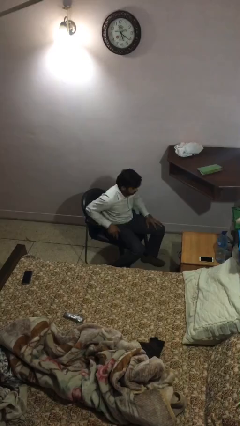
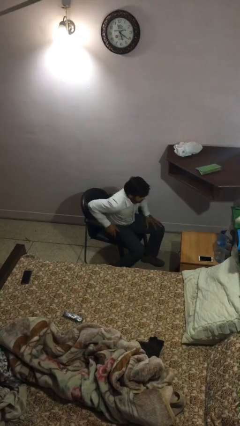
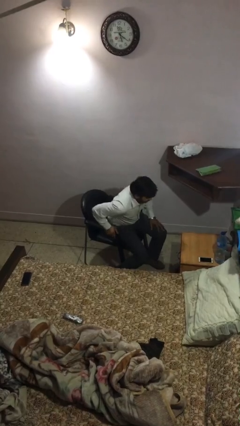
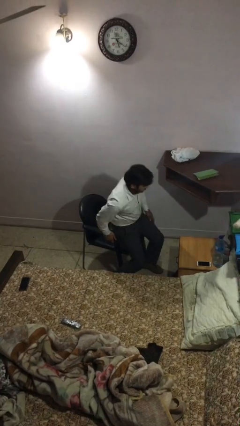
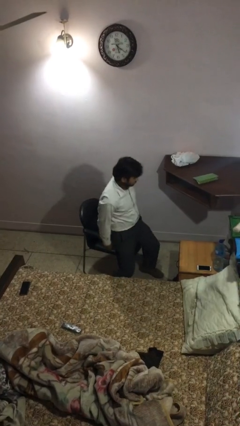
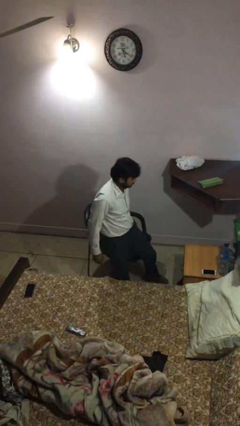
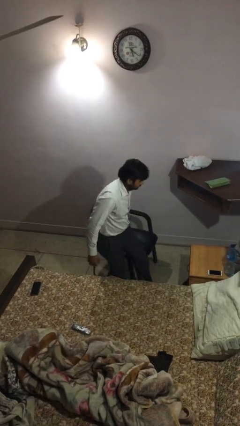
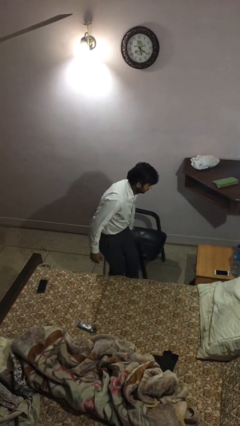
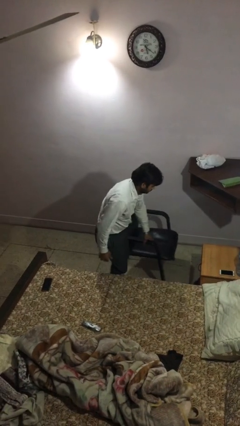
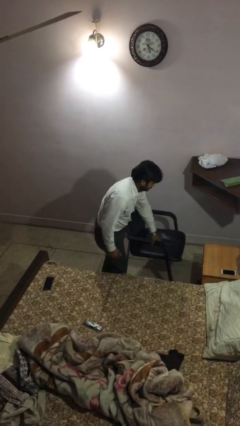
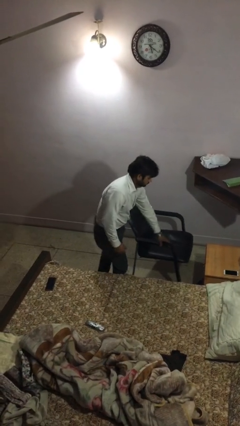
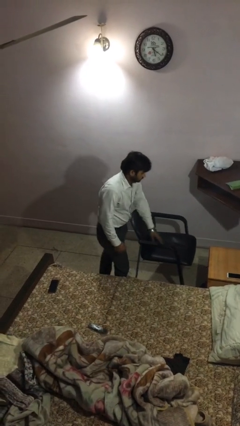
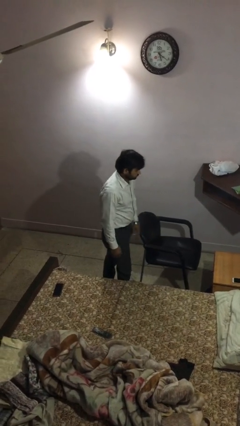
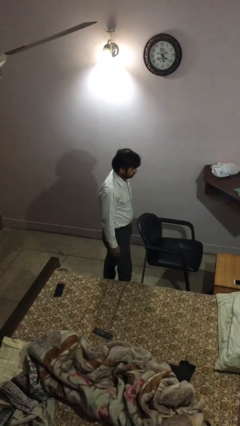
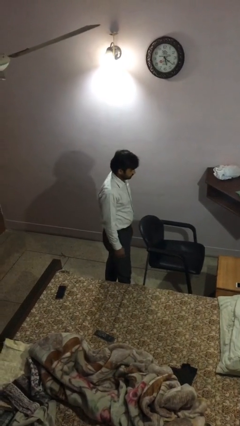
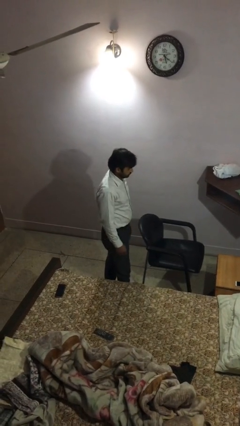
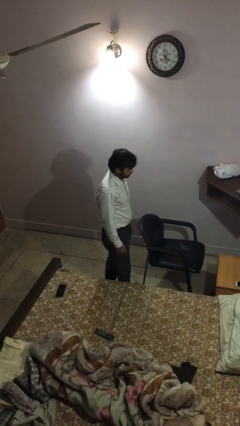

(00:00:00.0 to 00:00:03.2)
person stands up

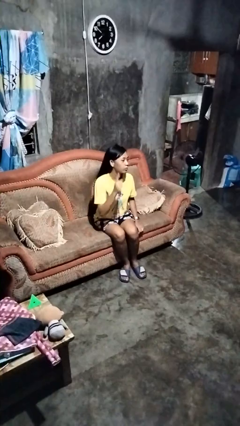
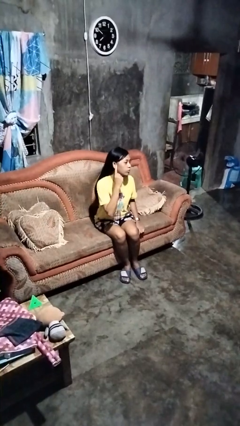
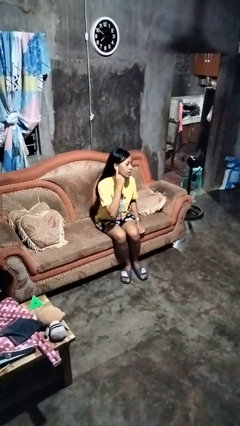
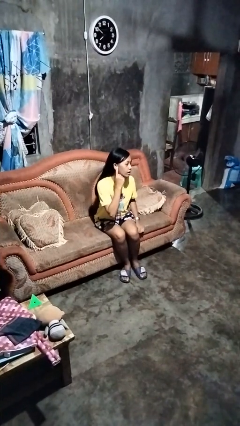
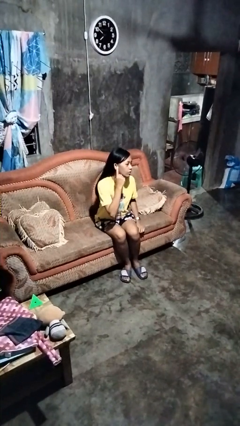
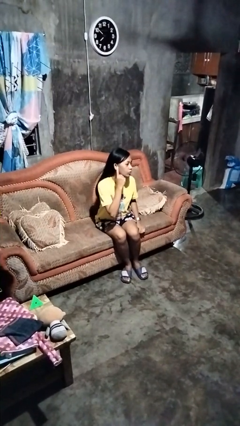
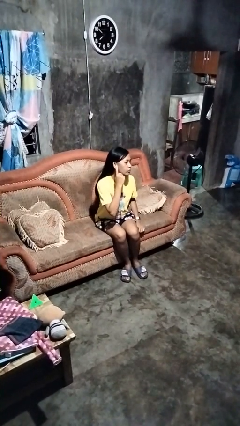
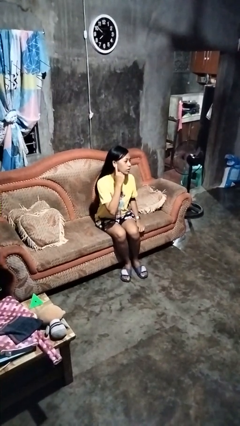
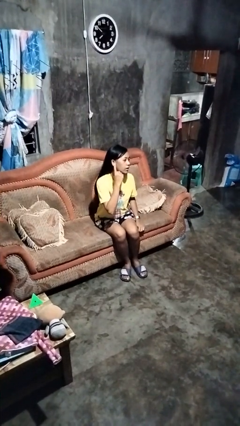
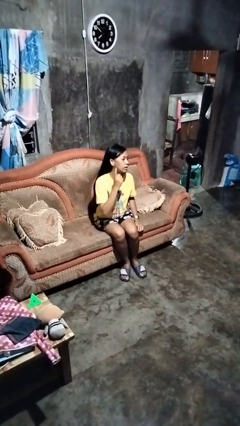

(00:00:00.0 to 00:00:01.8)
person gestures listen closely

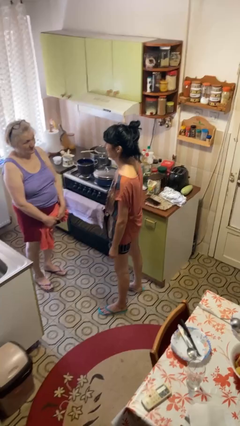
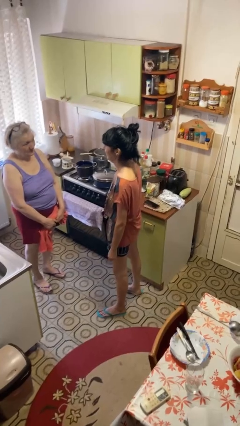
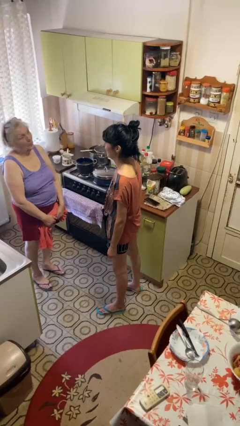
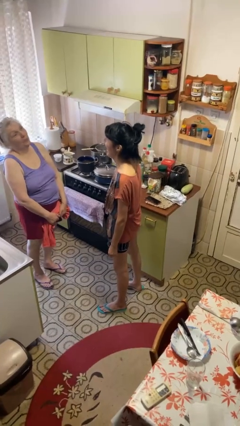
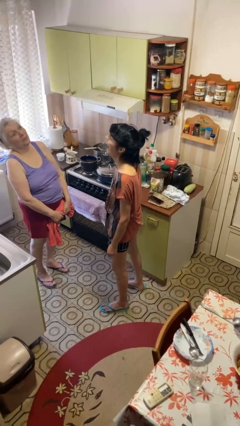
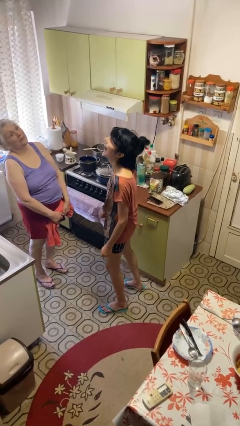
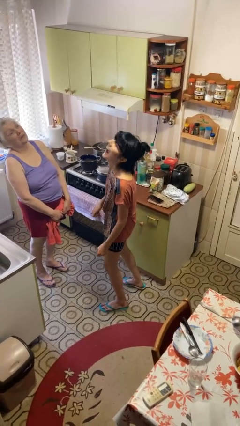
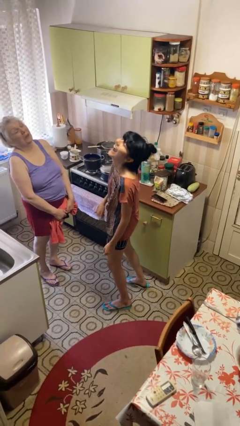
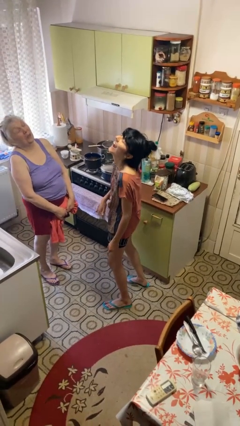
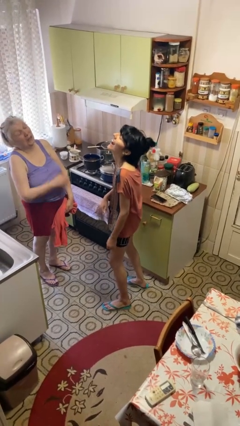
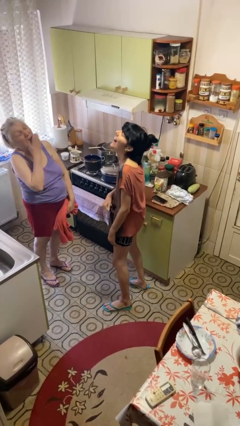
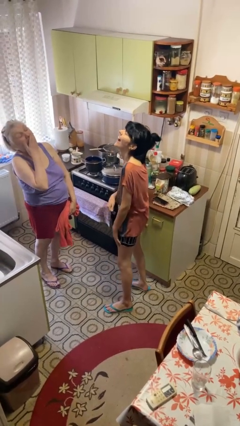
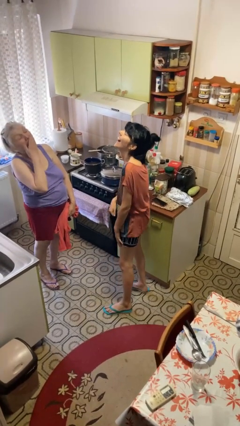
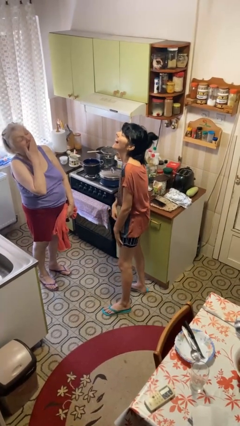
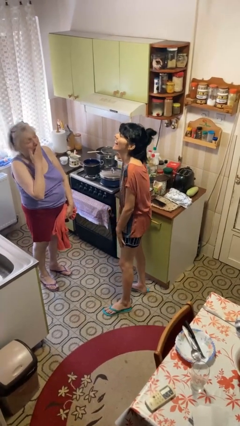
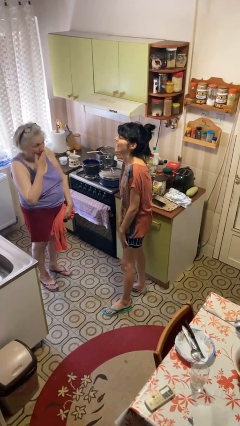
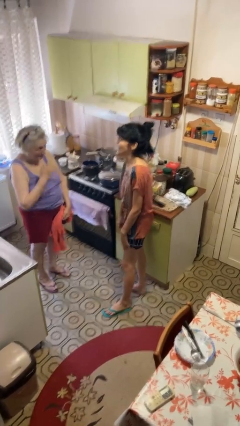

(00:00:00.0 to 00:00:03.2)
person laughs with person

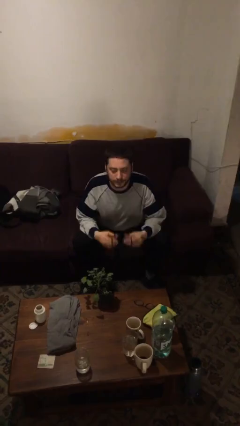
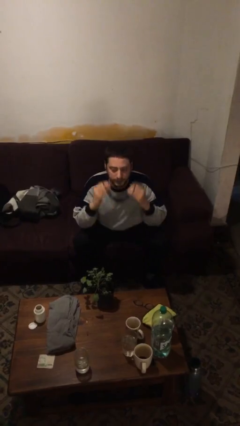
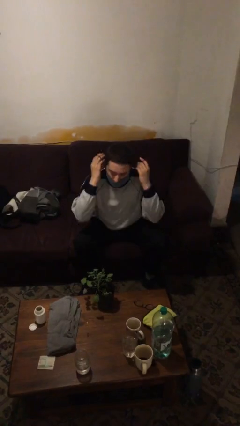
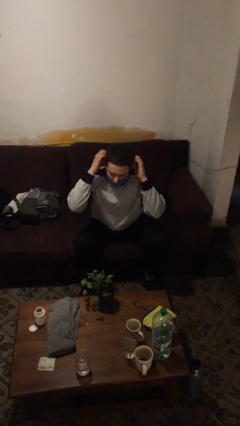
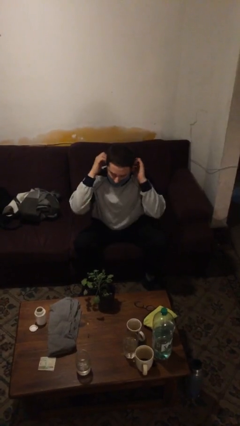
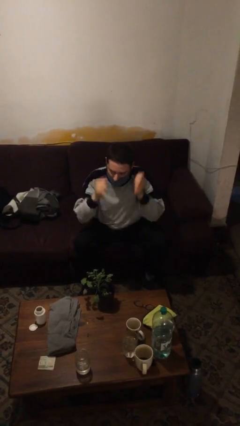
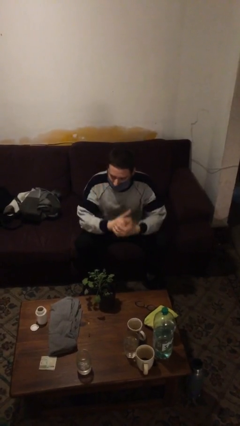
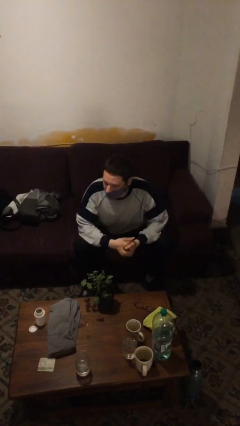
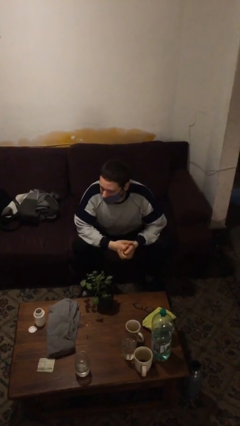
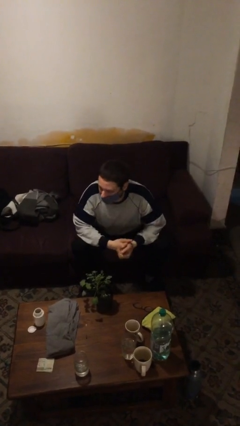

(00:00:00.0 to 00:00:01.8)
person puts on facemask

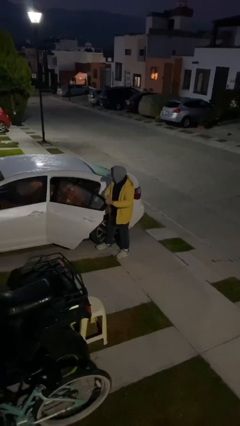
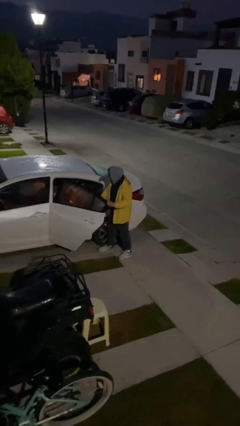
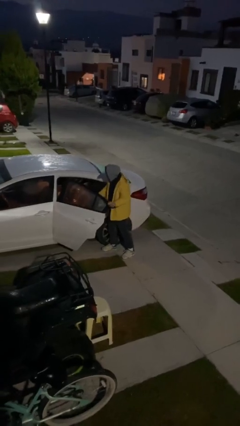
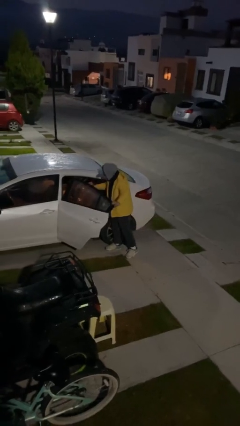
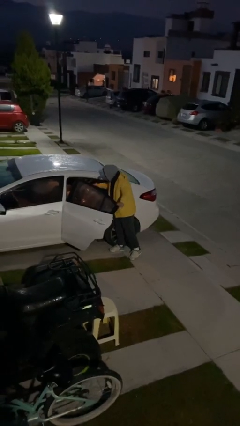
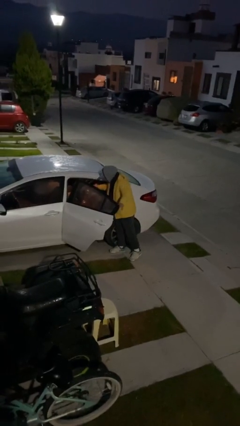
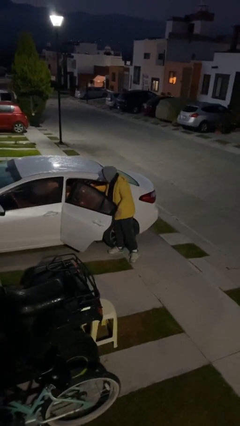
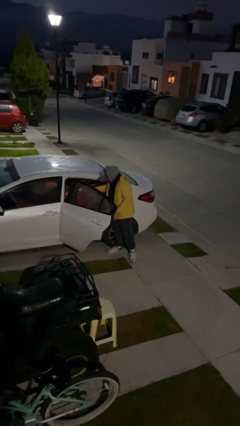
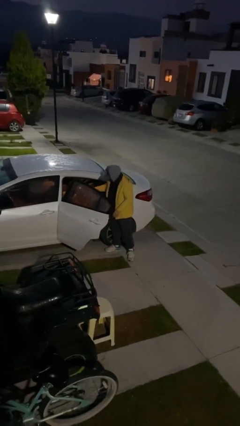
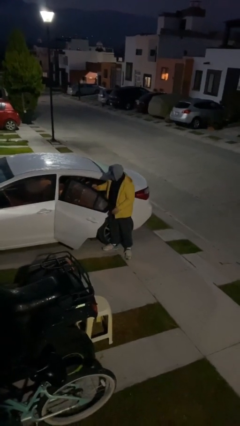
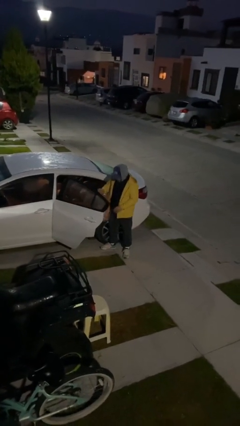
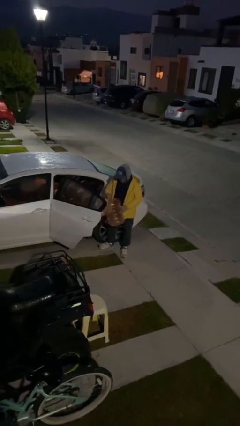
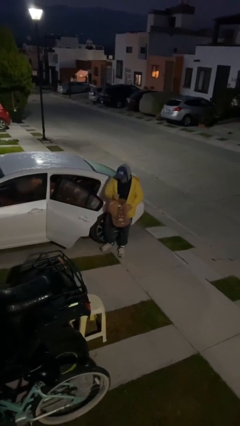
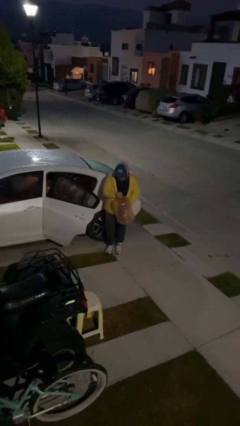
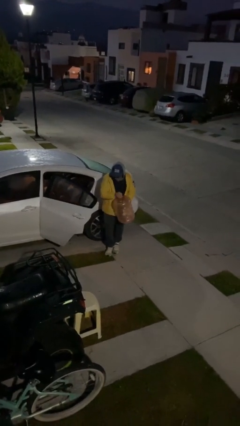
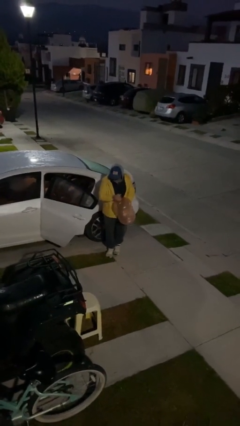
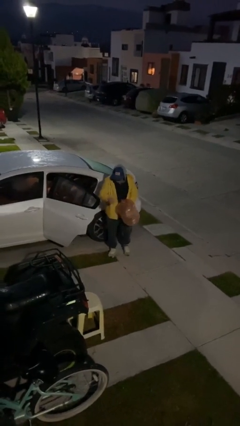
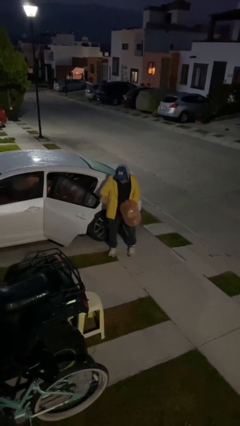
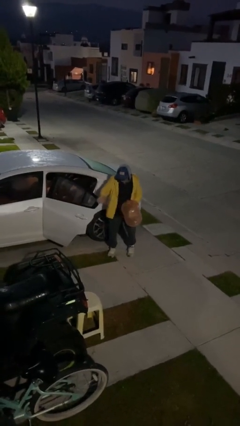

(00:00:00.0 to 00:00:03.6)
person unloads car

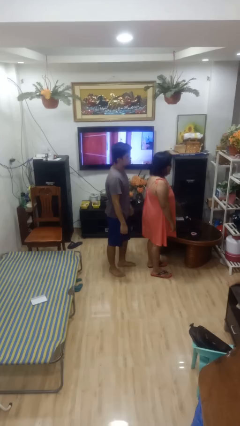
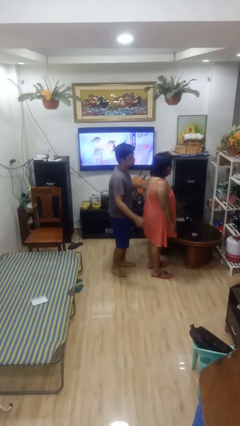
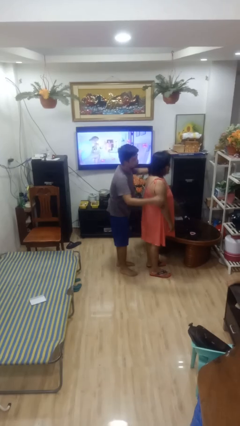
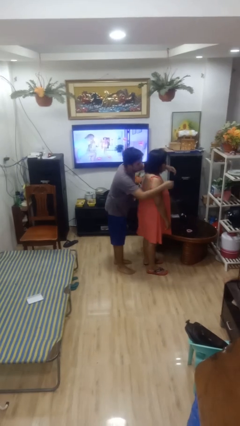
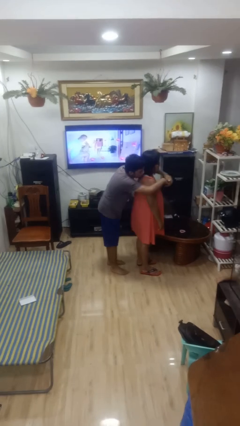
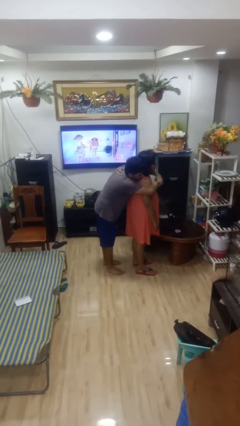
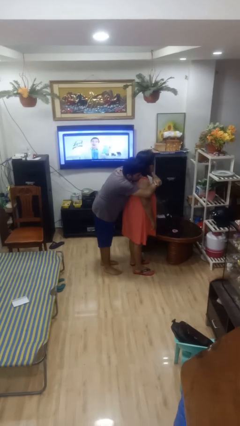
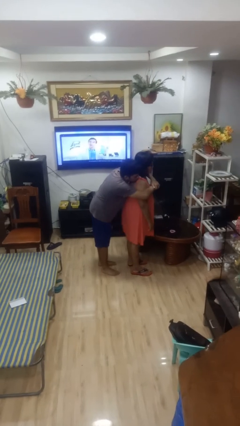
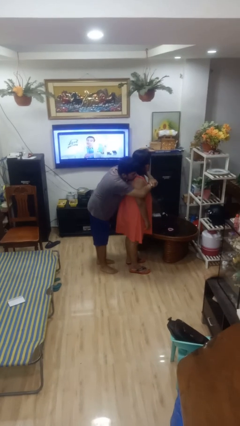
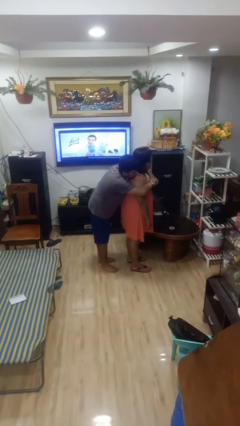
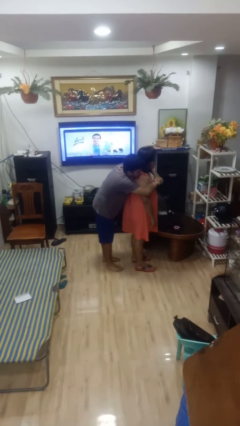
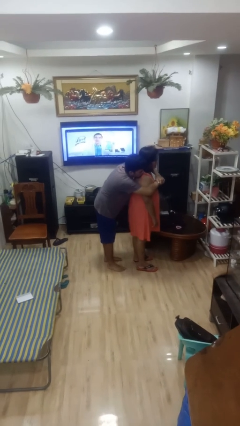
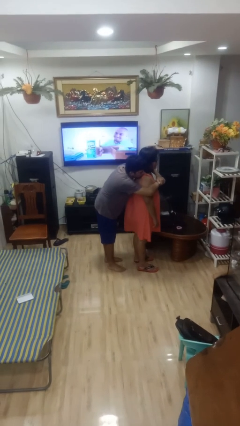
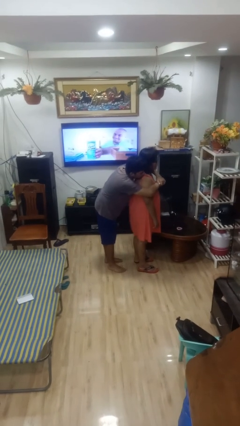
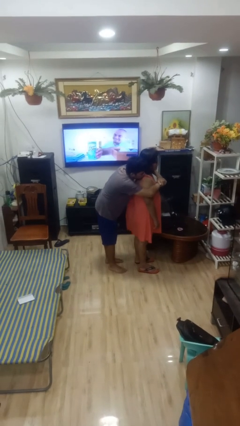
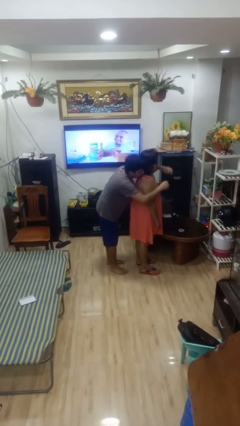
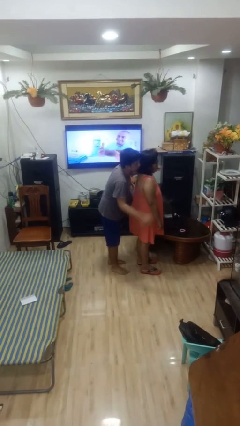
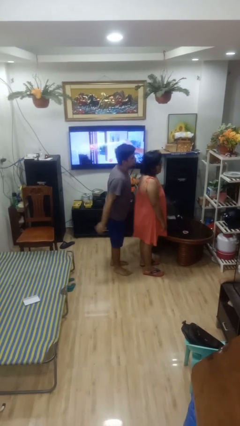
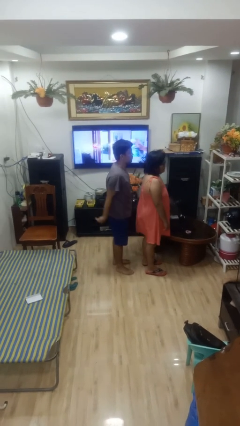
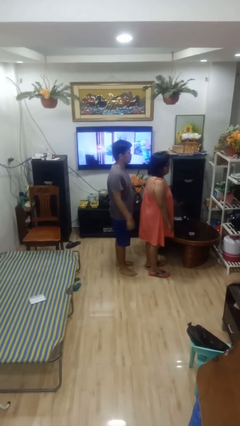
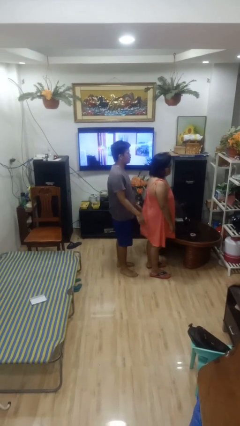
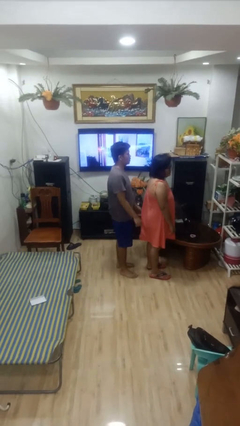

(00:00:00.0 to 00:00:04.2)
person hugs person from behind
